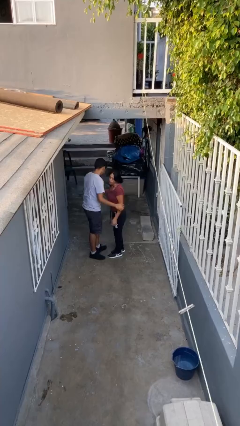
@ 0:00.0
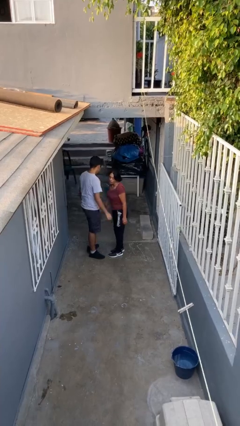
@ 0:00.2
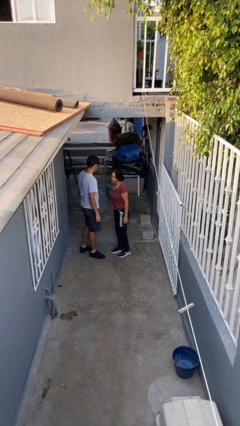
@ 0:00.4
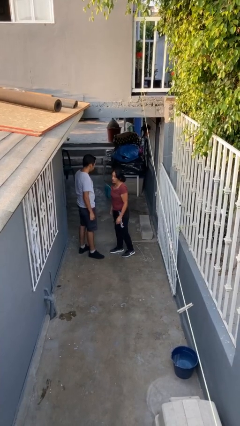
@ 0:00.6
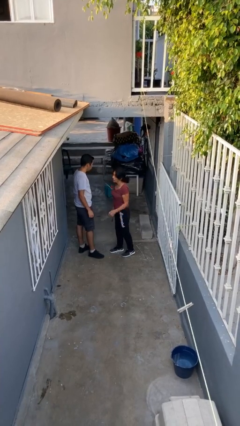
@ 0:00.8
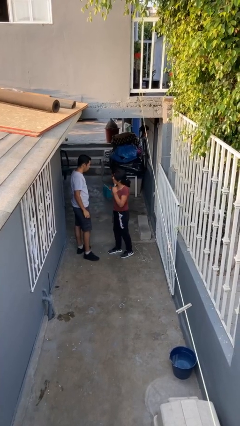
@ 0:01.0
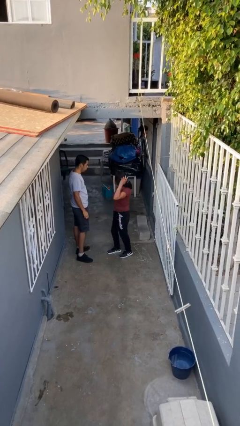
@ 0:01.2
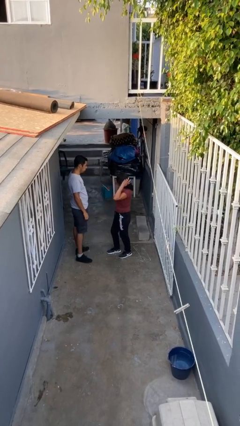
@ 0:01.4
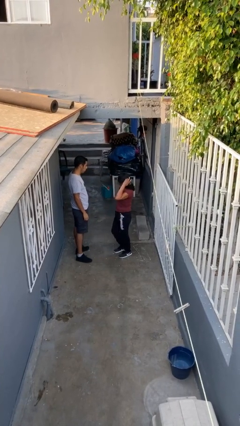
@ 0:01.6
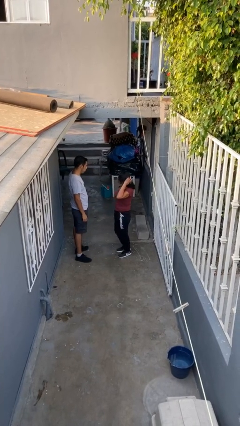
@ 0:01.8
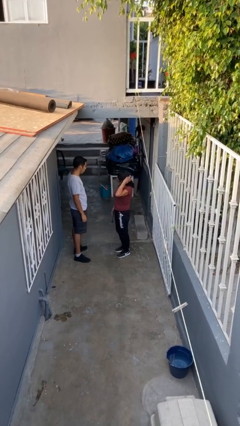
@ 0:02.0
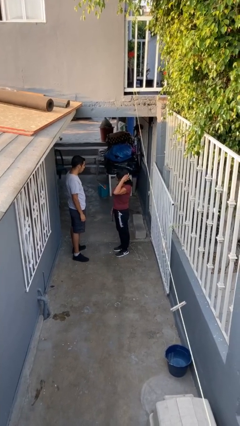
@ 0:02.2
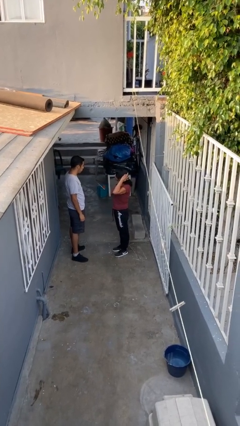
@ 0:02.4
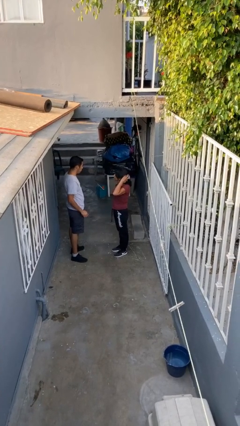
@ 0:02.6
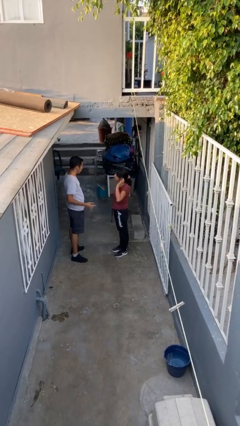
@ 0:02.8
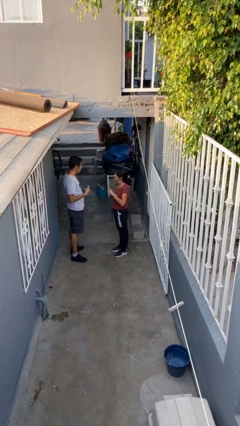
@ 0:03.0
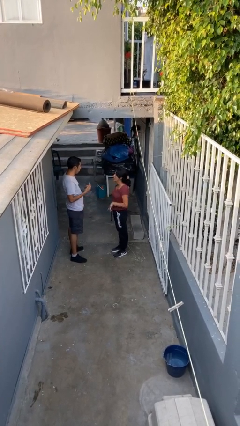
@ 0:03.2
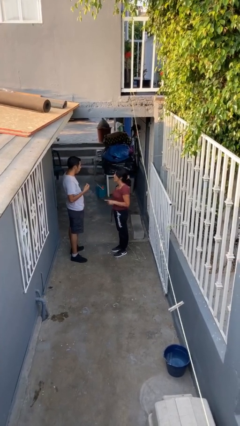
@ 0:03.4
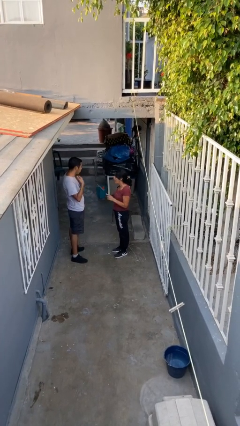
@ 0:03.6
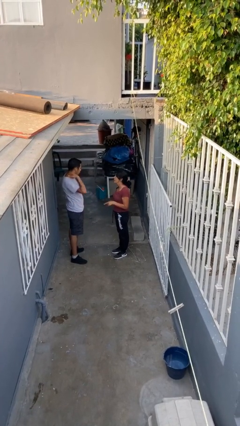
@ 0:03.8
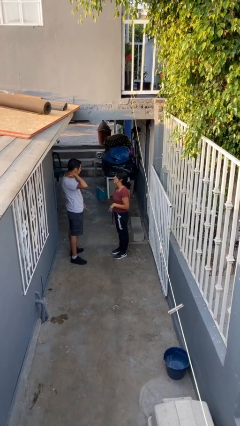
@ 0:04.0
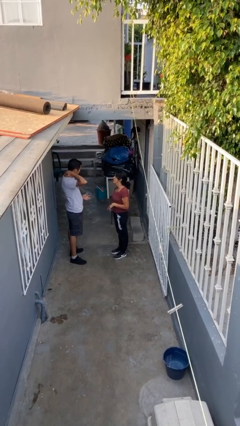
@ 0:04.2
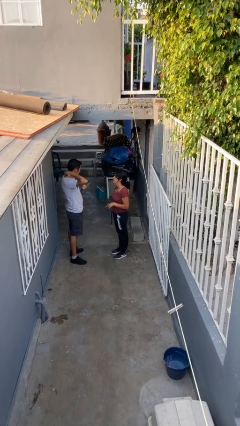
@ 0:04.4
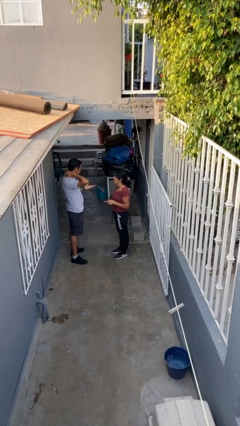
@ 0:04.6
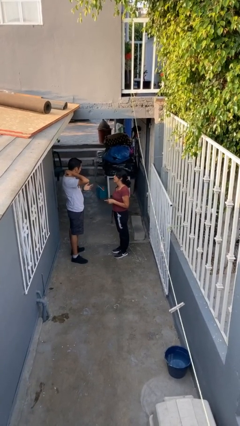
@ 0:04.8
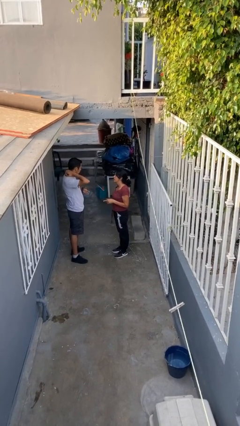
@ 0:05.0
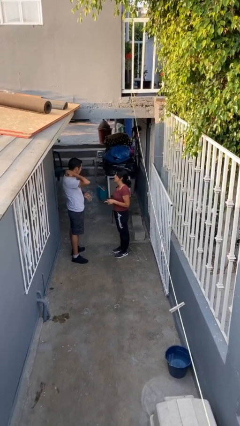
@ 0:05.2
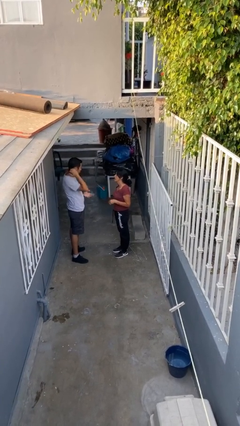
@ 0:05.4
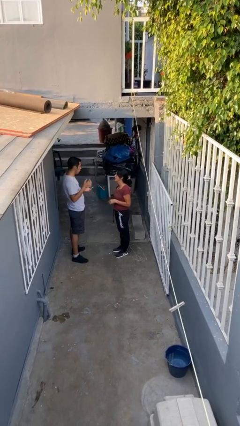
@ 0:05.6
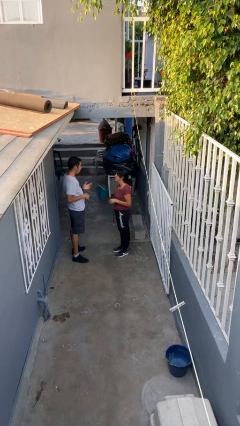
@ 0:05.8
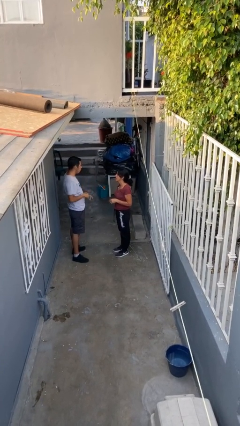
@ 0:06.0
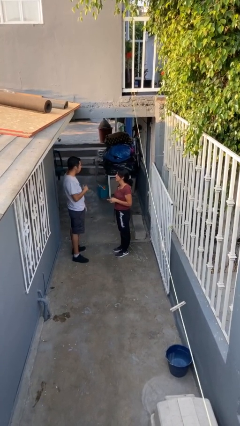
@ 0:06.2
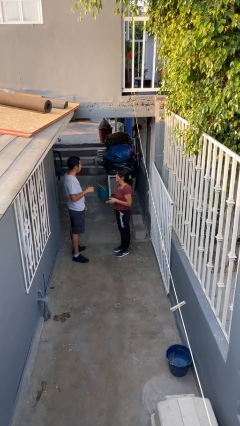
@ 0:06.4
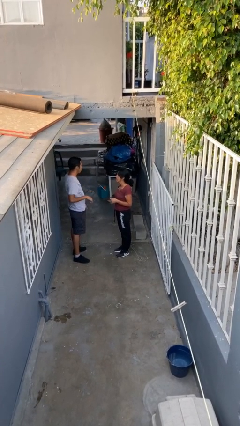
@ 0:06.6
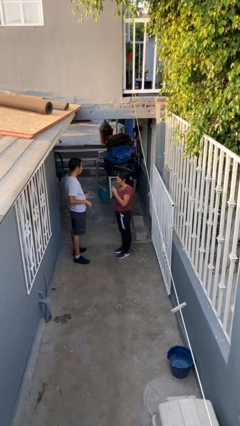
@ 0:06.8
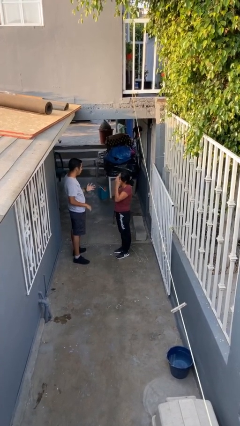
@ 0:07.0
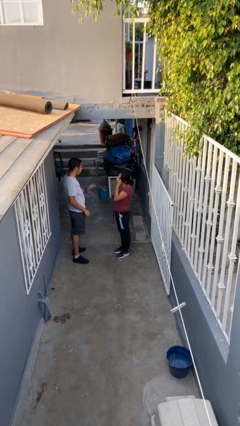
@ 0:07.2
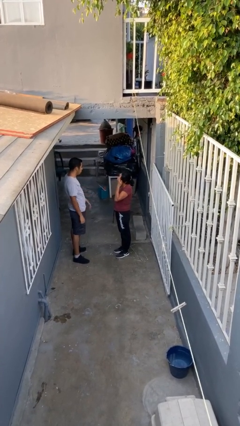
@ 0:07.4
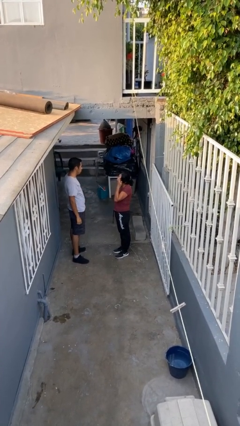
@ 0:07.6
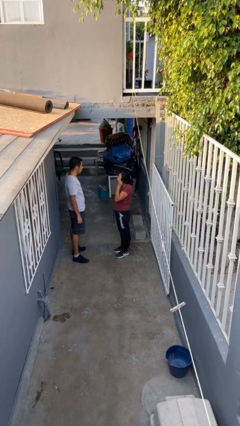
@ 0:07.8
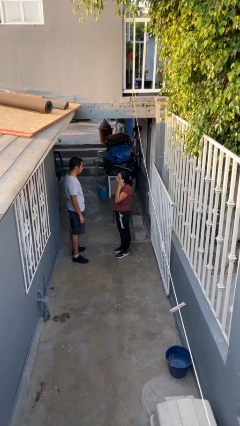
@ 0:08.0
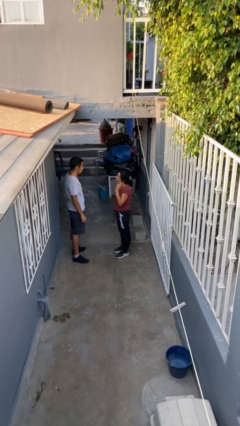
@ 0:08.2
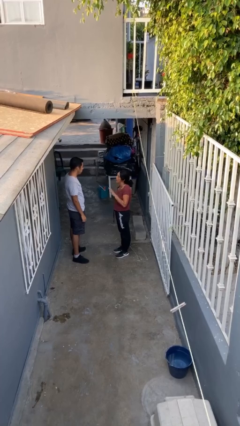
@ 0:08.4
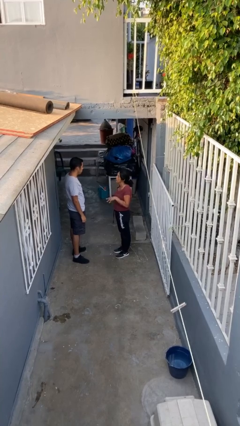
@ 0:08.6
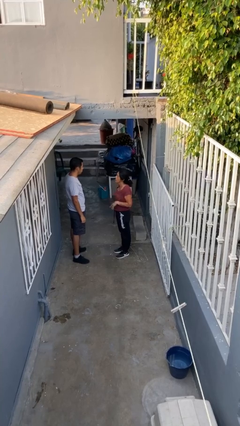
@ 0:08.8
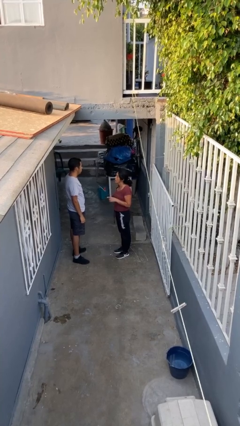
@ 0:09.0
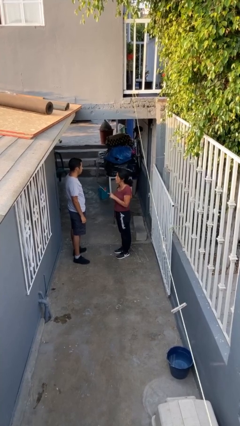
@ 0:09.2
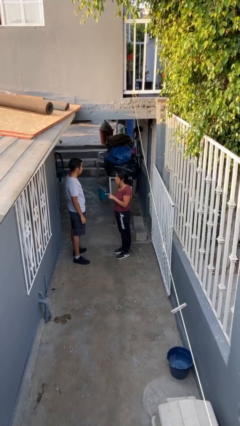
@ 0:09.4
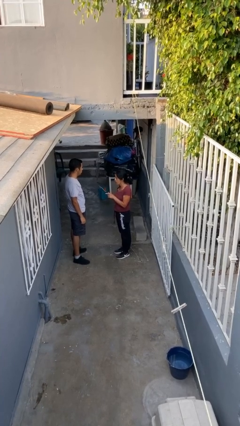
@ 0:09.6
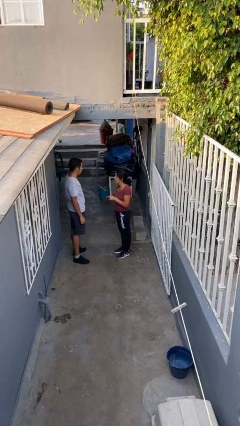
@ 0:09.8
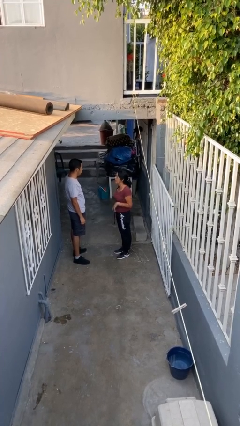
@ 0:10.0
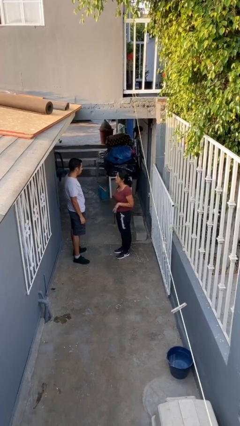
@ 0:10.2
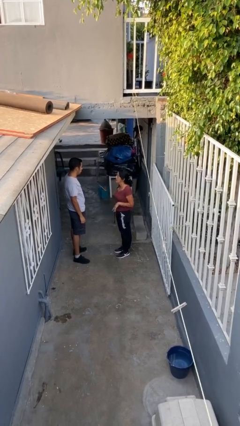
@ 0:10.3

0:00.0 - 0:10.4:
person talks to person

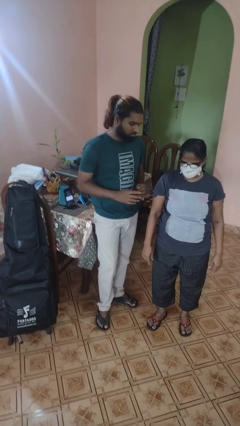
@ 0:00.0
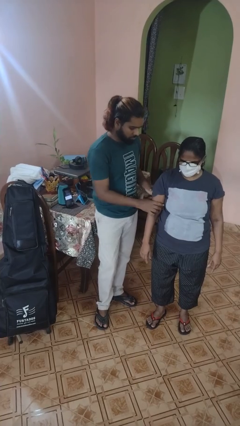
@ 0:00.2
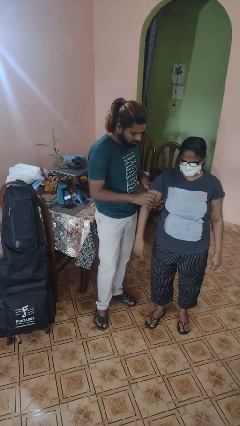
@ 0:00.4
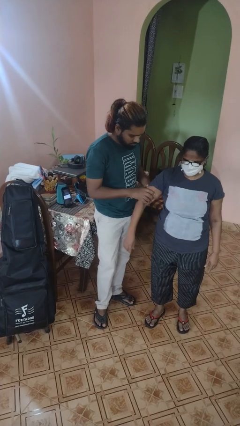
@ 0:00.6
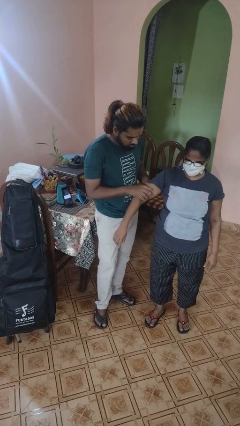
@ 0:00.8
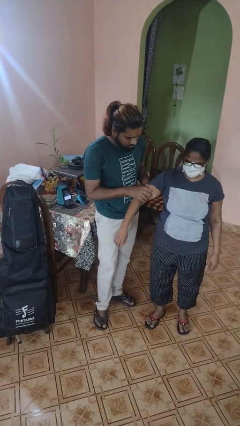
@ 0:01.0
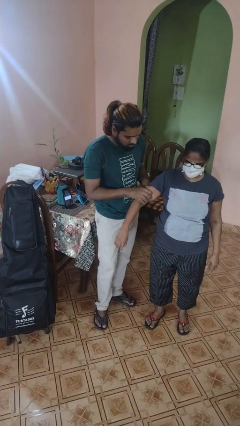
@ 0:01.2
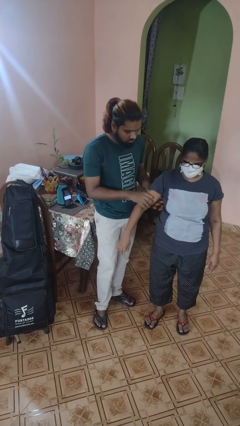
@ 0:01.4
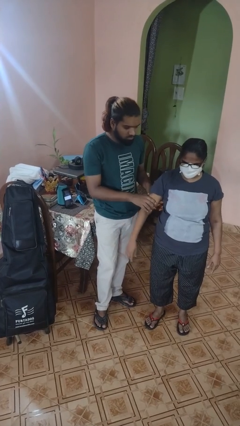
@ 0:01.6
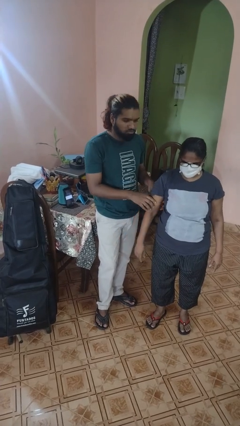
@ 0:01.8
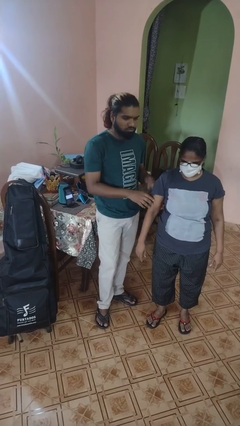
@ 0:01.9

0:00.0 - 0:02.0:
person grabs person by bicep

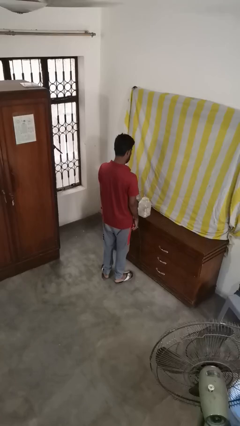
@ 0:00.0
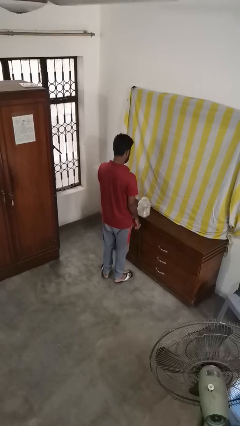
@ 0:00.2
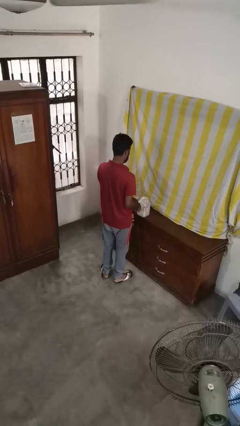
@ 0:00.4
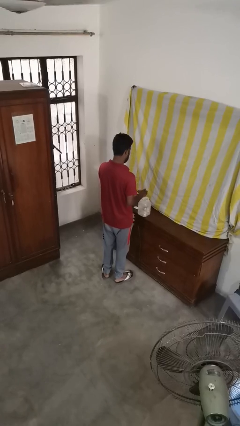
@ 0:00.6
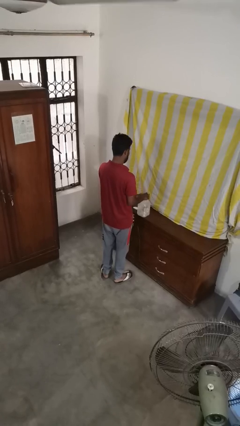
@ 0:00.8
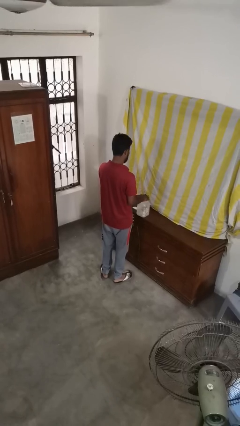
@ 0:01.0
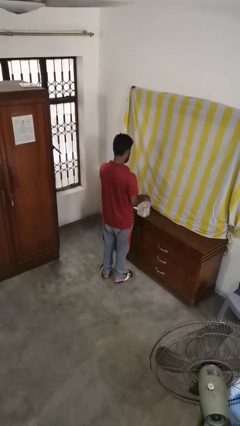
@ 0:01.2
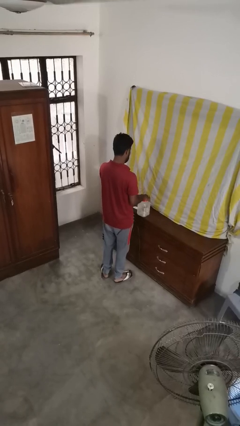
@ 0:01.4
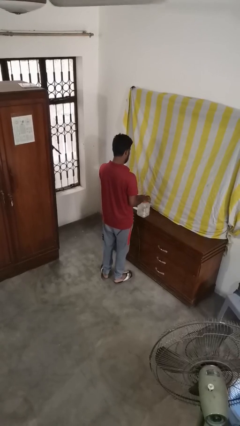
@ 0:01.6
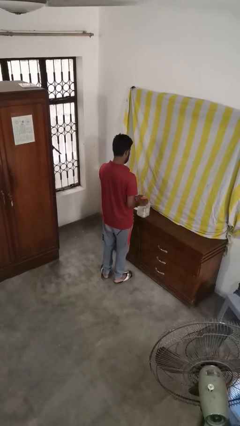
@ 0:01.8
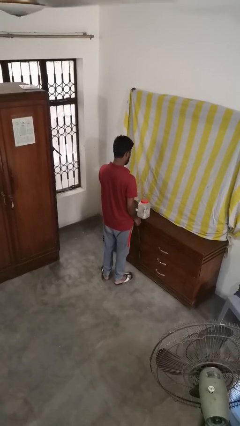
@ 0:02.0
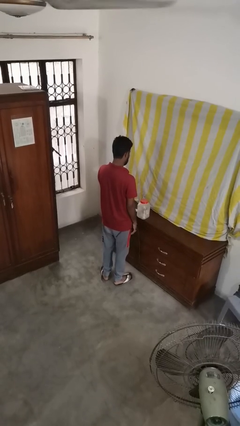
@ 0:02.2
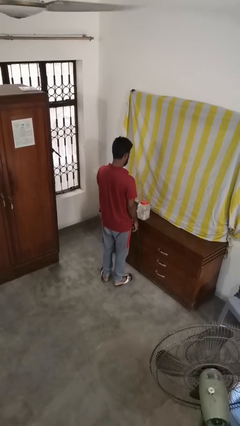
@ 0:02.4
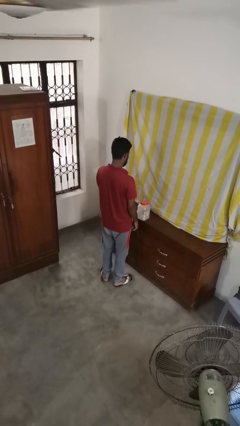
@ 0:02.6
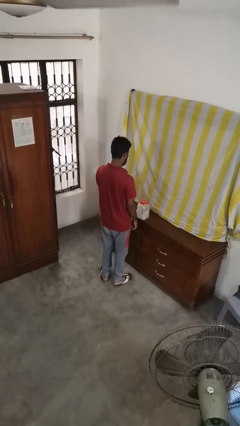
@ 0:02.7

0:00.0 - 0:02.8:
person closes jar

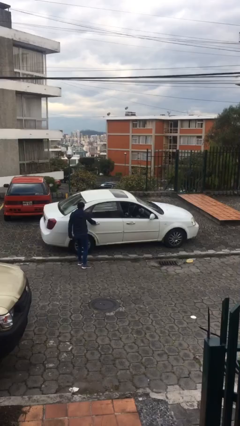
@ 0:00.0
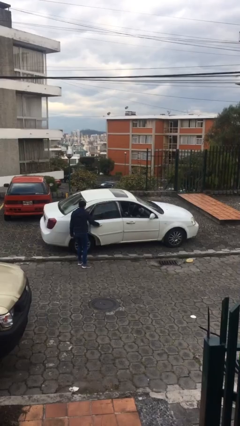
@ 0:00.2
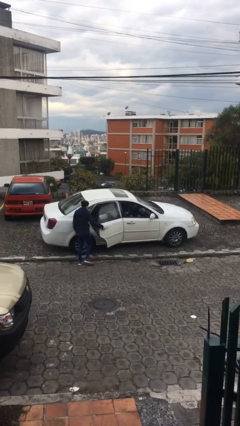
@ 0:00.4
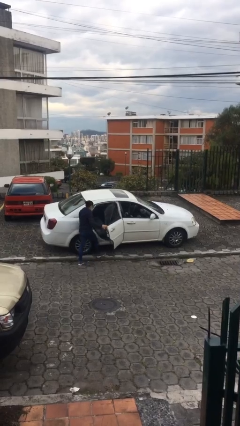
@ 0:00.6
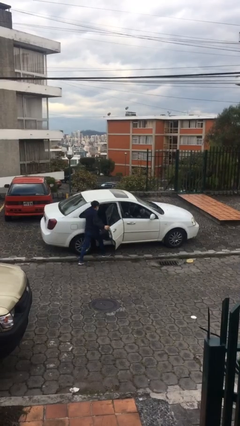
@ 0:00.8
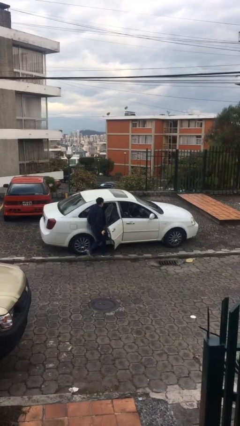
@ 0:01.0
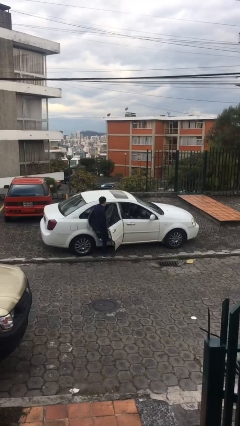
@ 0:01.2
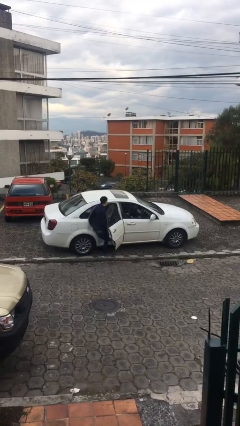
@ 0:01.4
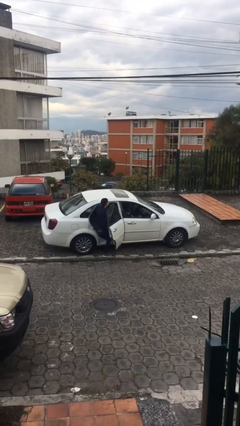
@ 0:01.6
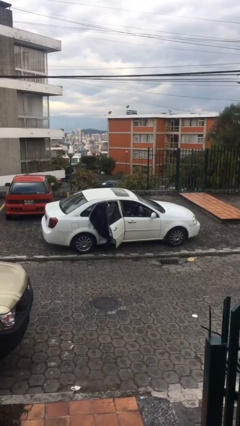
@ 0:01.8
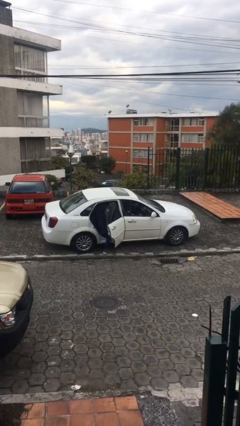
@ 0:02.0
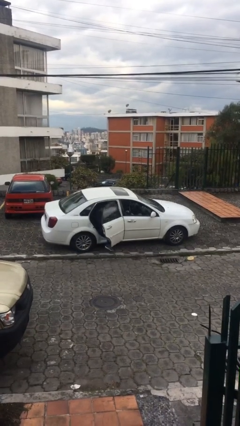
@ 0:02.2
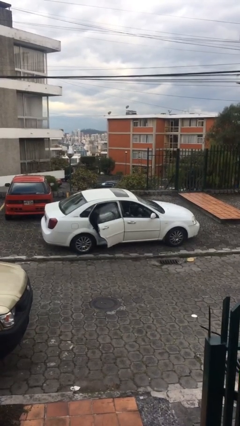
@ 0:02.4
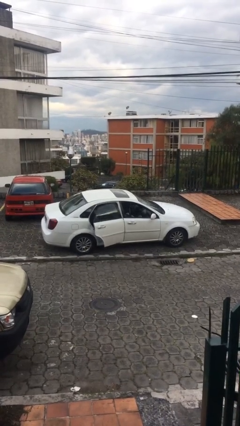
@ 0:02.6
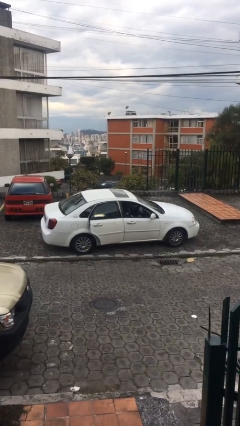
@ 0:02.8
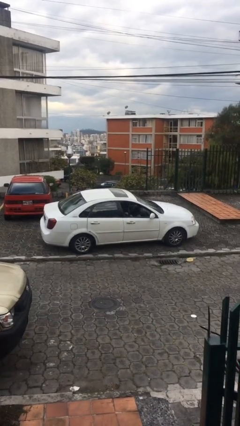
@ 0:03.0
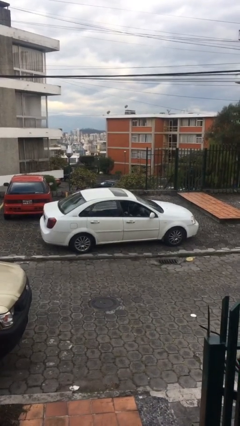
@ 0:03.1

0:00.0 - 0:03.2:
car picks up person
